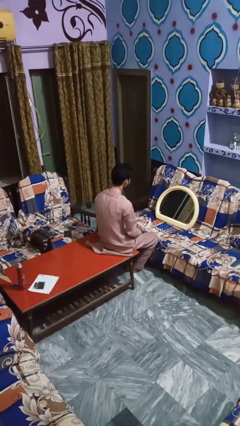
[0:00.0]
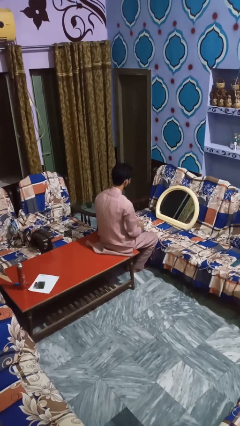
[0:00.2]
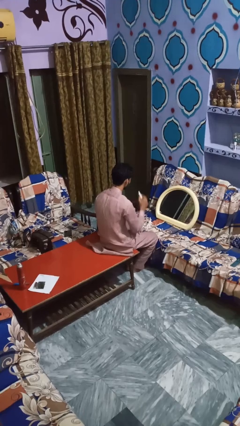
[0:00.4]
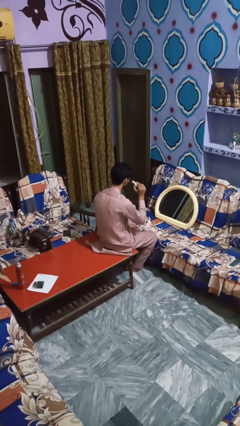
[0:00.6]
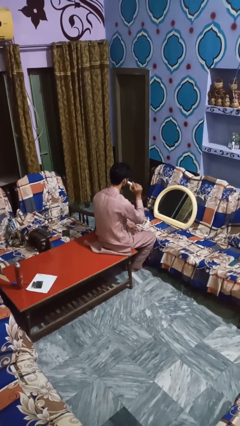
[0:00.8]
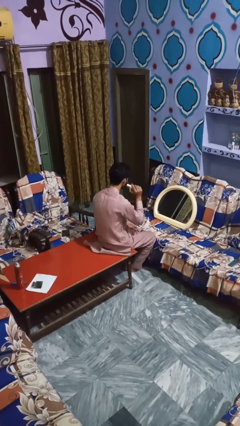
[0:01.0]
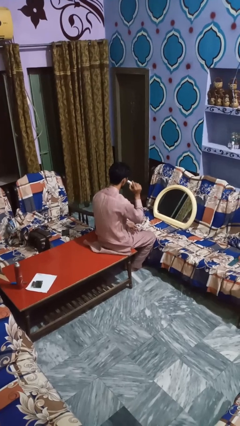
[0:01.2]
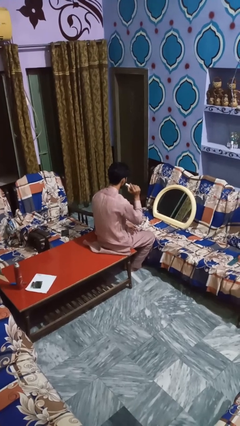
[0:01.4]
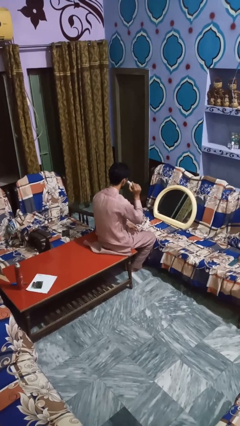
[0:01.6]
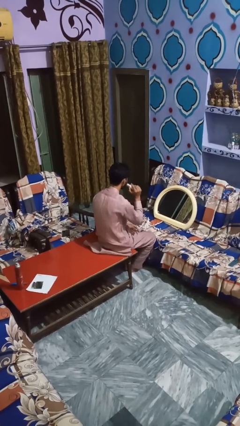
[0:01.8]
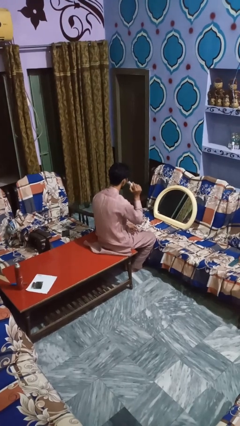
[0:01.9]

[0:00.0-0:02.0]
person applies foundation makeup

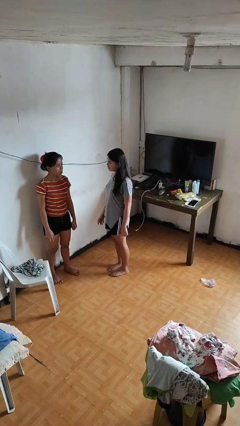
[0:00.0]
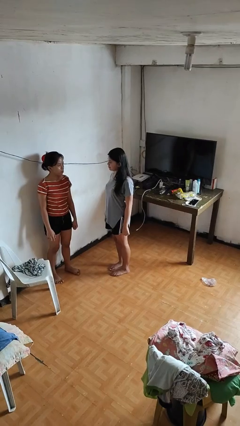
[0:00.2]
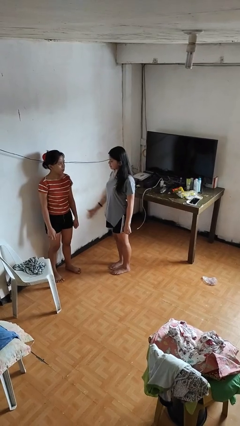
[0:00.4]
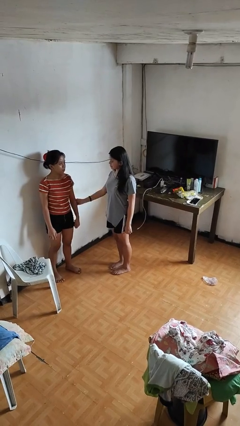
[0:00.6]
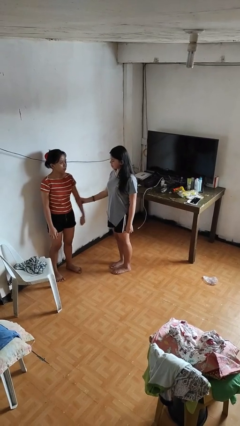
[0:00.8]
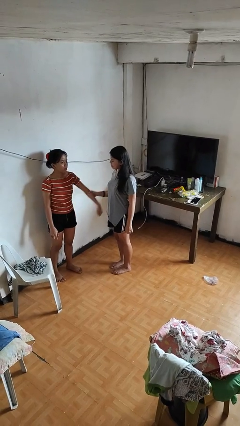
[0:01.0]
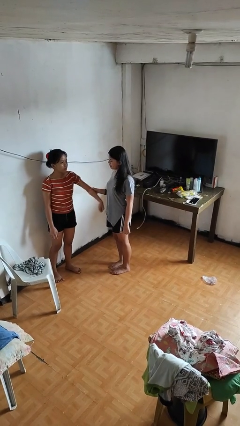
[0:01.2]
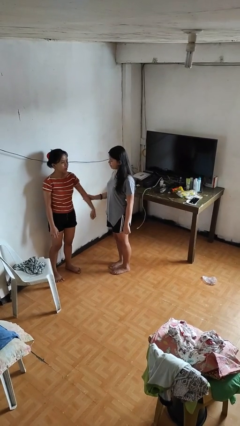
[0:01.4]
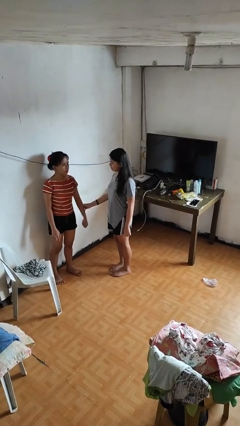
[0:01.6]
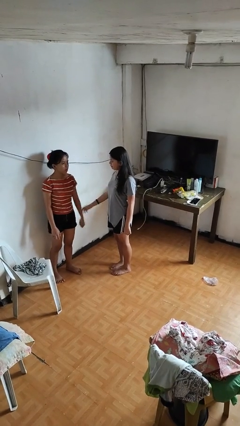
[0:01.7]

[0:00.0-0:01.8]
person grabs person by forearm

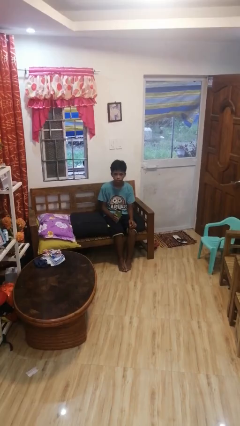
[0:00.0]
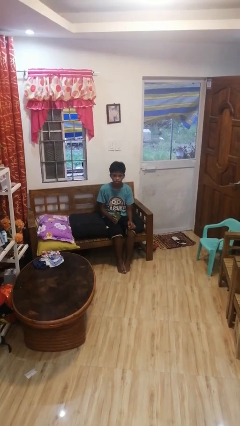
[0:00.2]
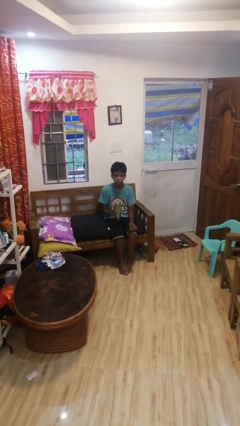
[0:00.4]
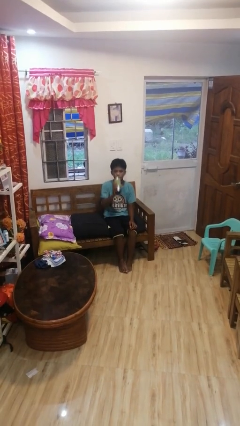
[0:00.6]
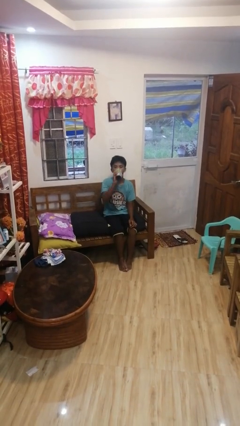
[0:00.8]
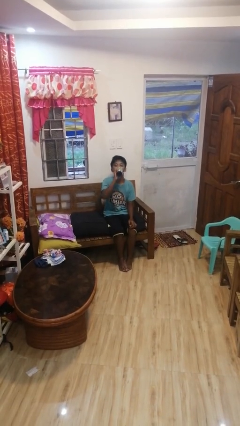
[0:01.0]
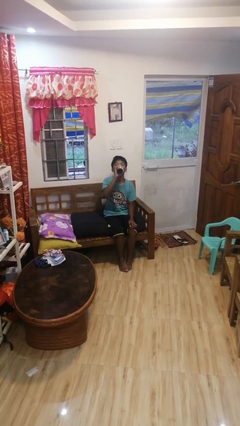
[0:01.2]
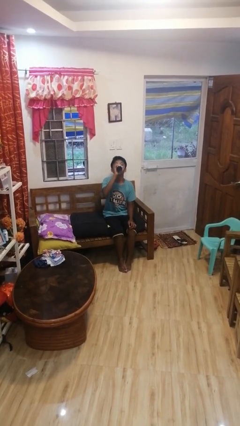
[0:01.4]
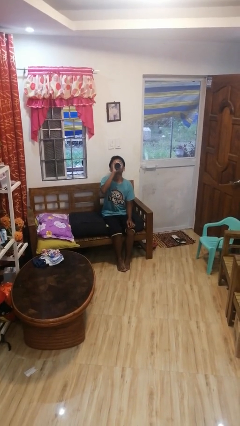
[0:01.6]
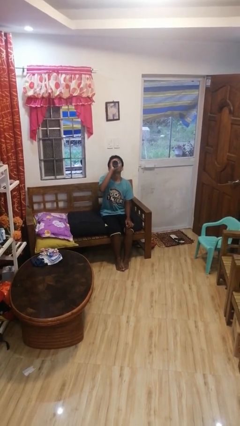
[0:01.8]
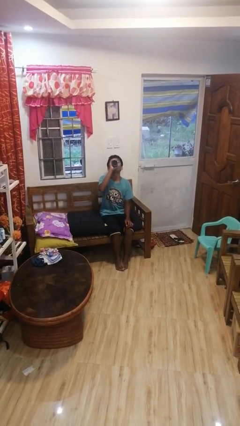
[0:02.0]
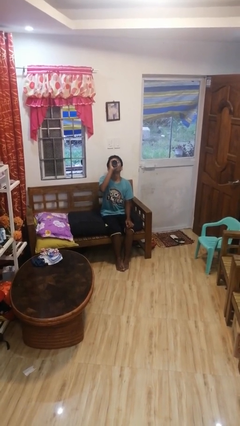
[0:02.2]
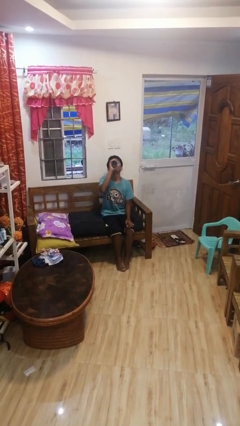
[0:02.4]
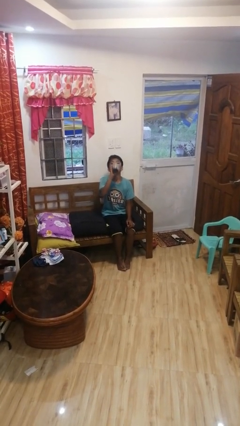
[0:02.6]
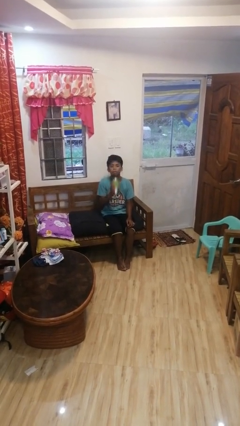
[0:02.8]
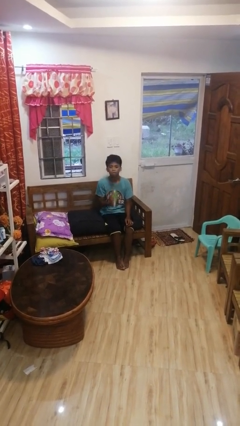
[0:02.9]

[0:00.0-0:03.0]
person drinks from bottle

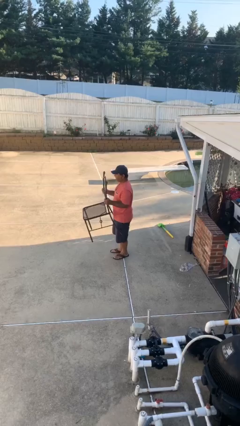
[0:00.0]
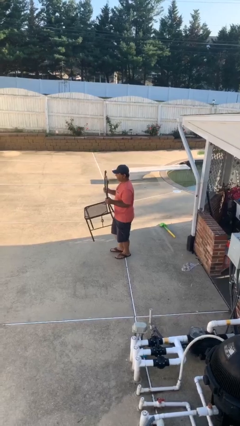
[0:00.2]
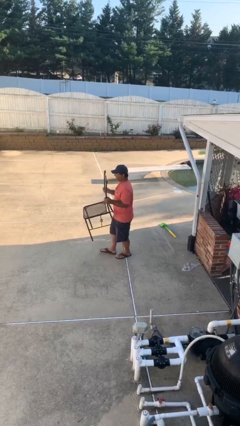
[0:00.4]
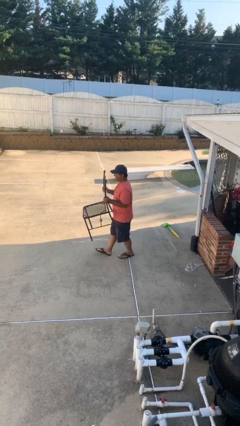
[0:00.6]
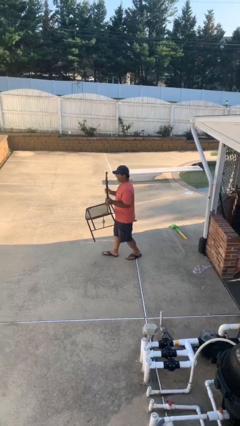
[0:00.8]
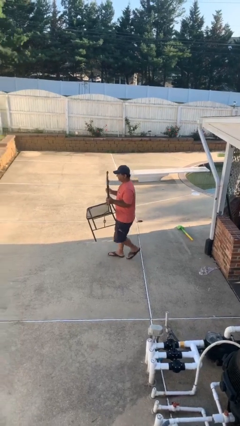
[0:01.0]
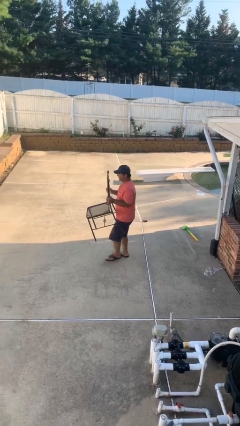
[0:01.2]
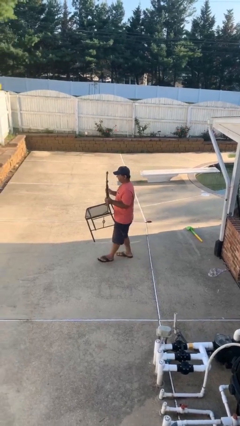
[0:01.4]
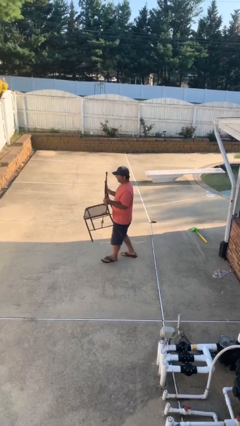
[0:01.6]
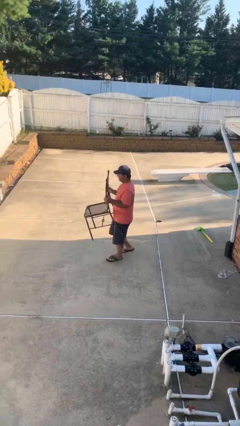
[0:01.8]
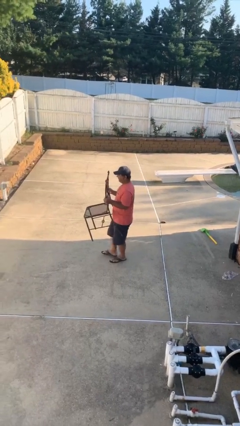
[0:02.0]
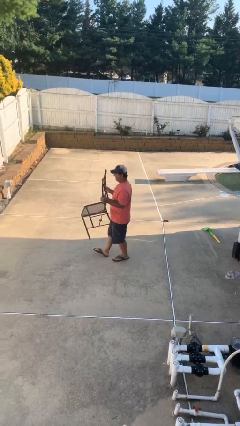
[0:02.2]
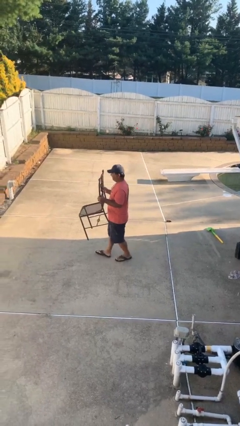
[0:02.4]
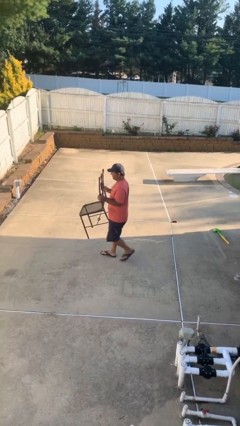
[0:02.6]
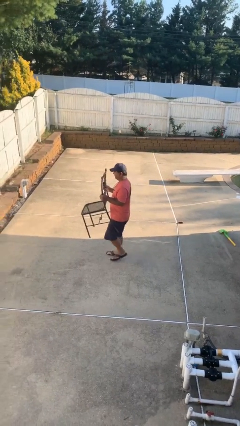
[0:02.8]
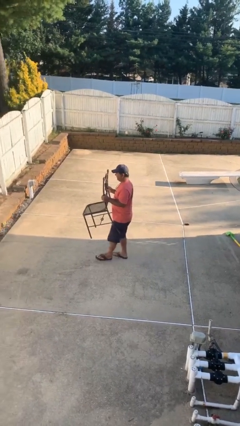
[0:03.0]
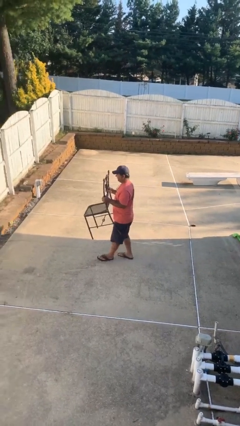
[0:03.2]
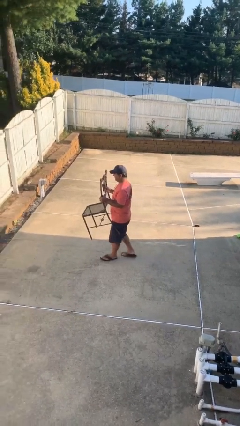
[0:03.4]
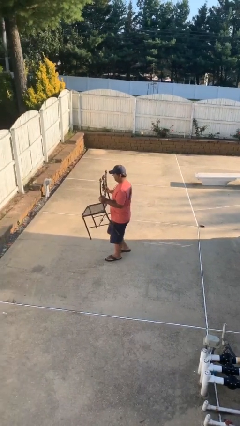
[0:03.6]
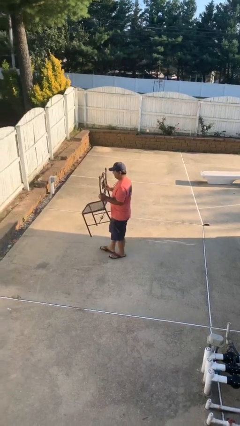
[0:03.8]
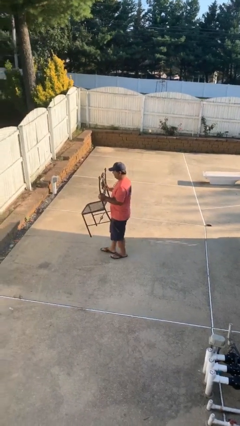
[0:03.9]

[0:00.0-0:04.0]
person carries heavy object

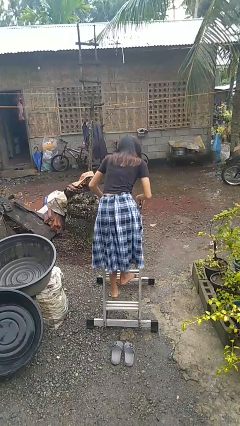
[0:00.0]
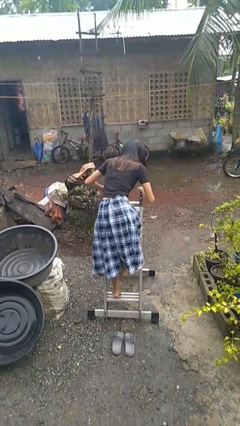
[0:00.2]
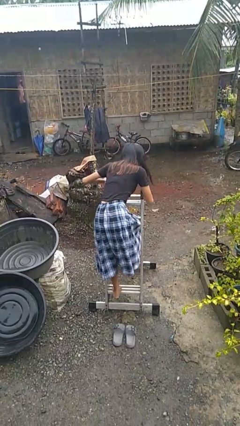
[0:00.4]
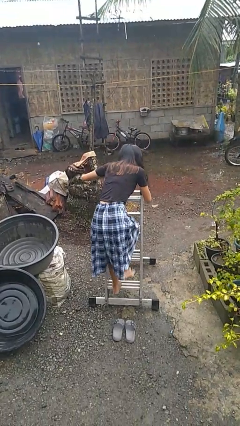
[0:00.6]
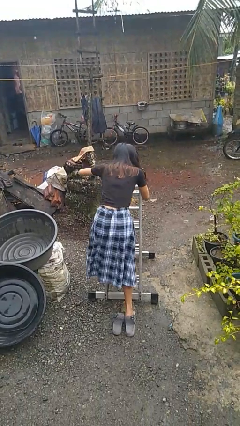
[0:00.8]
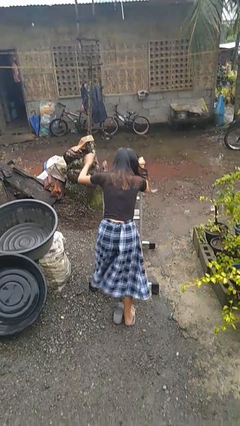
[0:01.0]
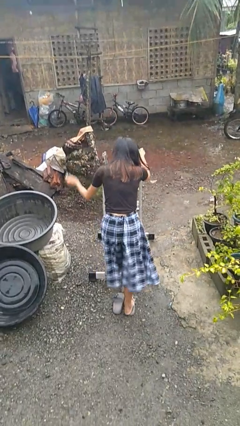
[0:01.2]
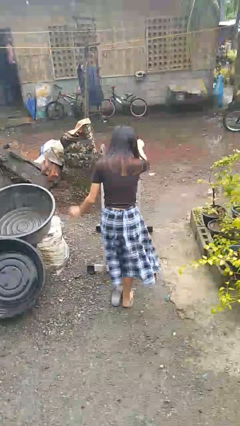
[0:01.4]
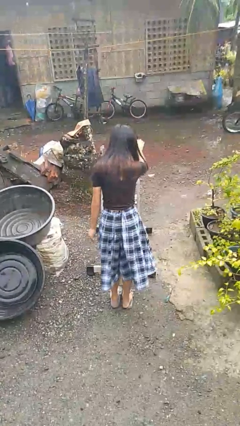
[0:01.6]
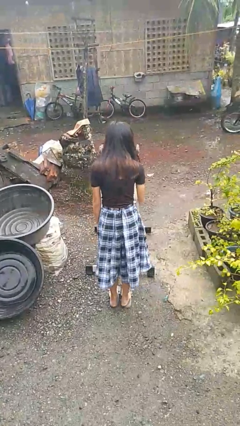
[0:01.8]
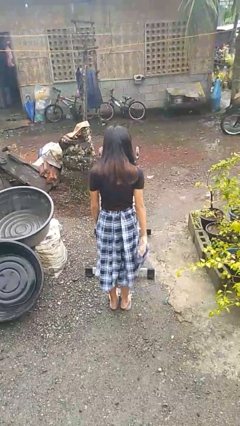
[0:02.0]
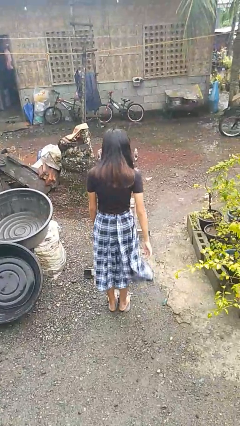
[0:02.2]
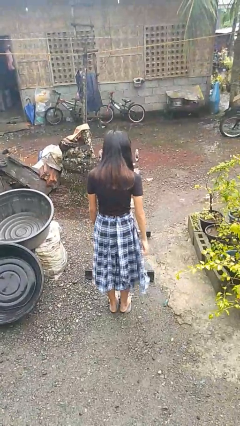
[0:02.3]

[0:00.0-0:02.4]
person climbs down ladder

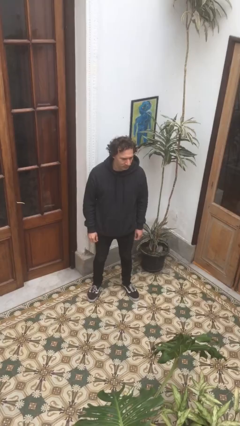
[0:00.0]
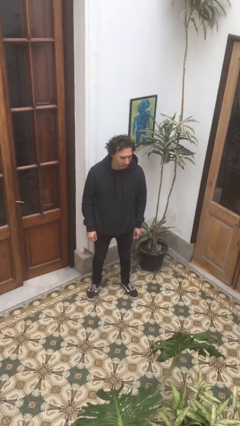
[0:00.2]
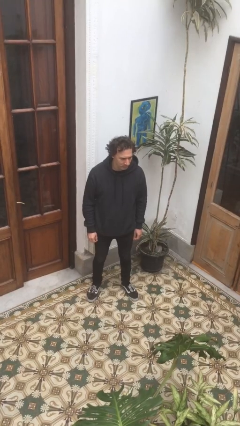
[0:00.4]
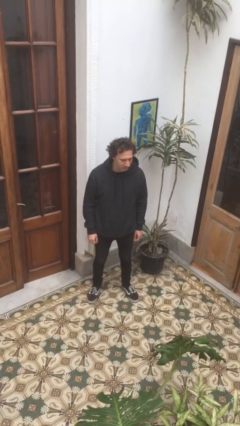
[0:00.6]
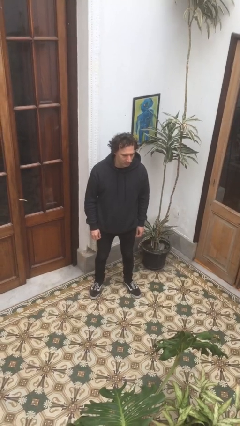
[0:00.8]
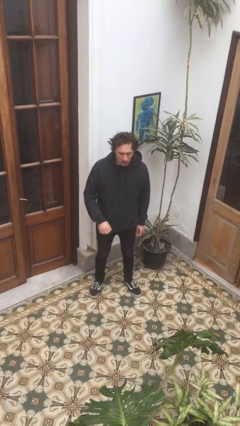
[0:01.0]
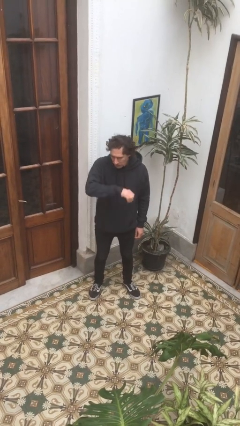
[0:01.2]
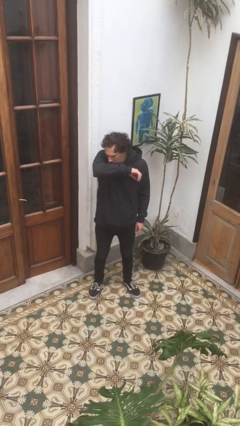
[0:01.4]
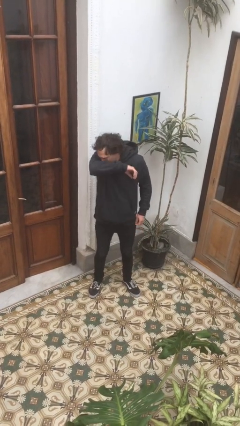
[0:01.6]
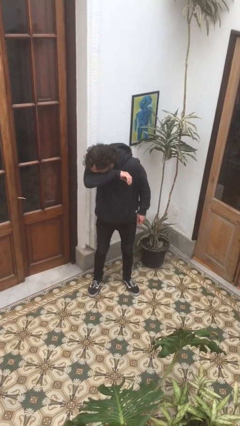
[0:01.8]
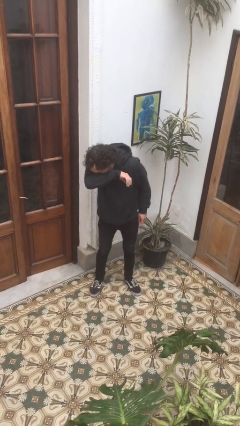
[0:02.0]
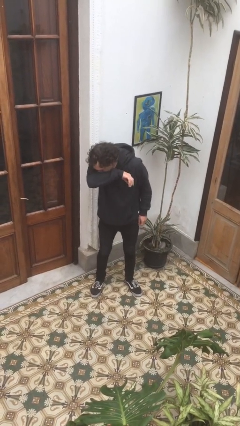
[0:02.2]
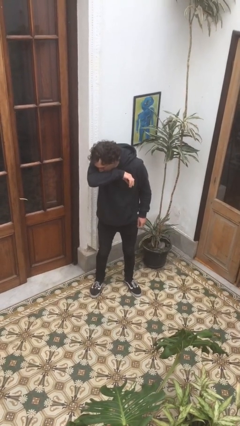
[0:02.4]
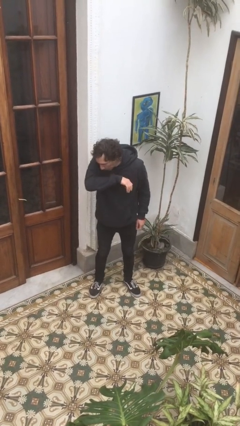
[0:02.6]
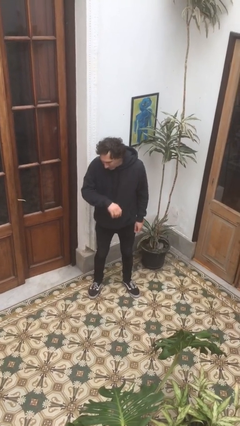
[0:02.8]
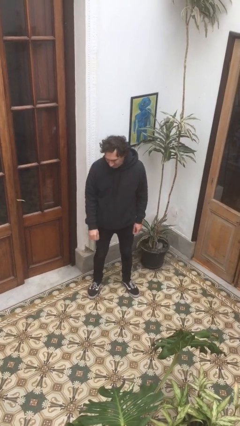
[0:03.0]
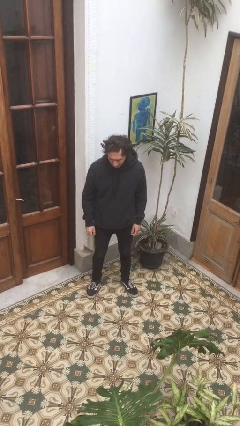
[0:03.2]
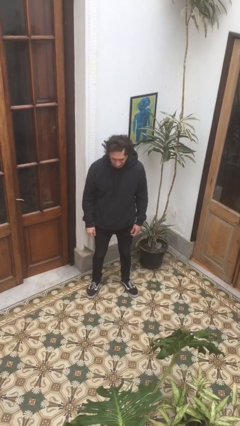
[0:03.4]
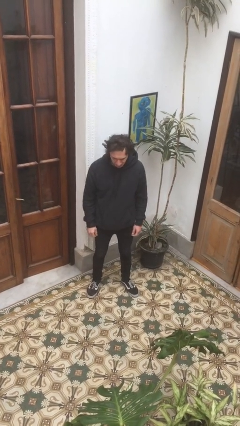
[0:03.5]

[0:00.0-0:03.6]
person sneezes into arm

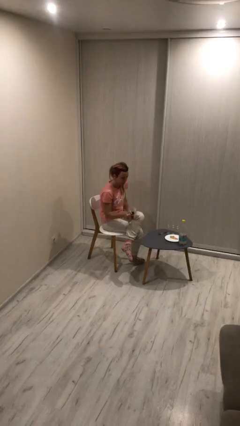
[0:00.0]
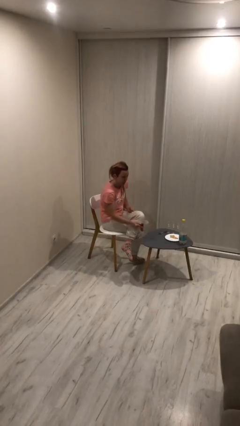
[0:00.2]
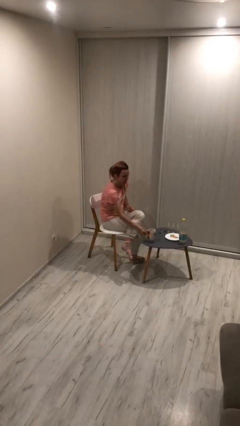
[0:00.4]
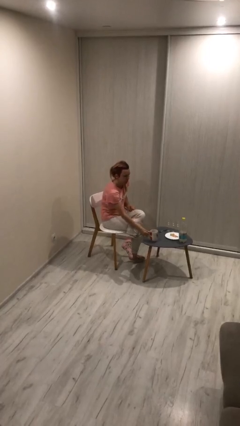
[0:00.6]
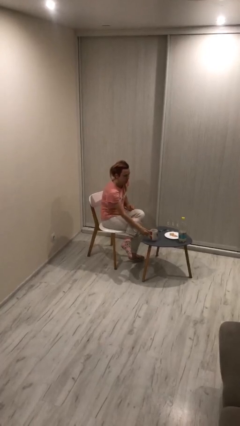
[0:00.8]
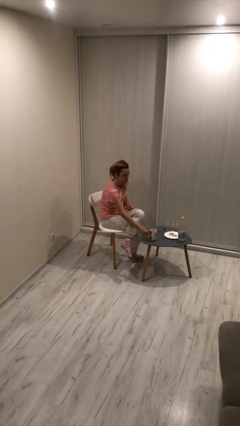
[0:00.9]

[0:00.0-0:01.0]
person puts down object on table
